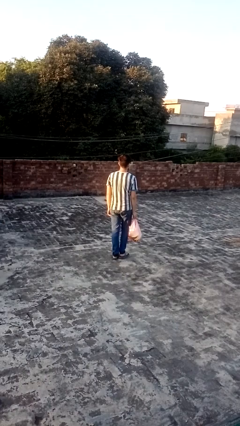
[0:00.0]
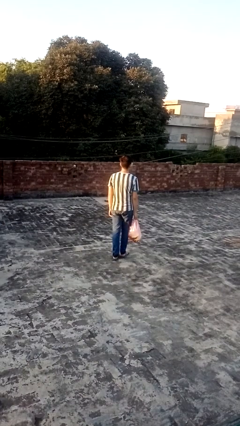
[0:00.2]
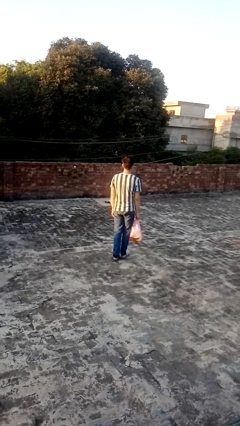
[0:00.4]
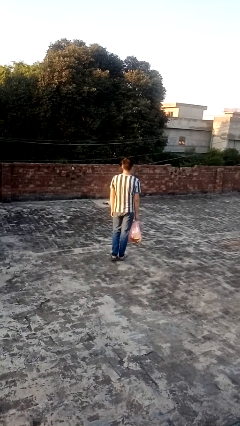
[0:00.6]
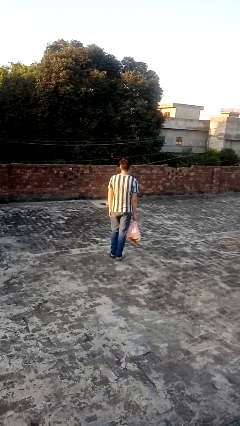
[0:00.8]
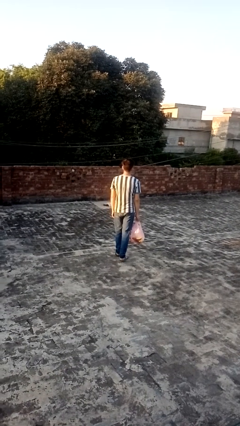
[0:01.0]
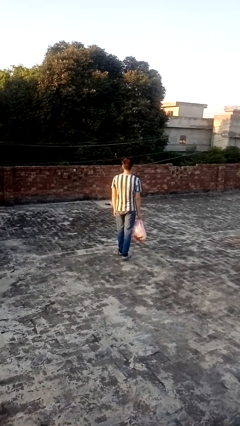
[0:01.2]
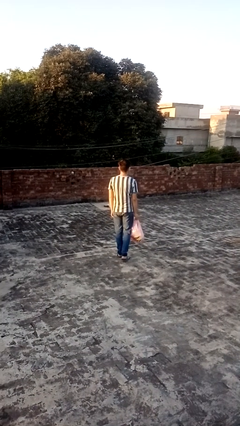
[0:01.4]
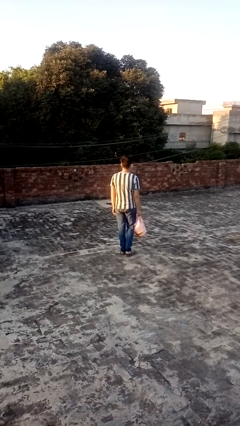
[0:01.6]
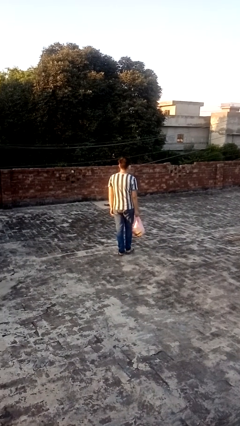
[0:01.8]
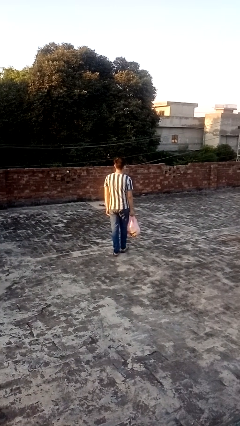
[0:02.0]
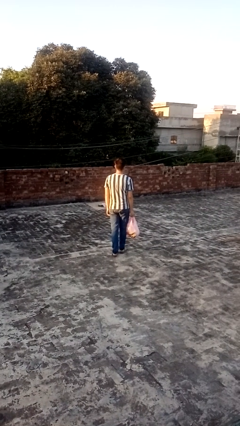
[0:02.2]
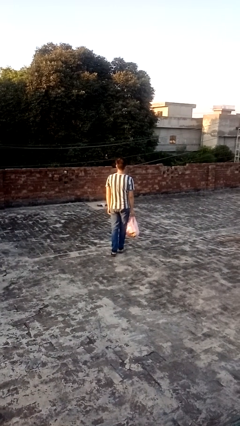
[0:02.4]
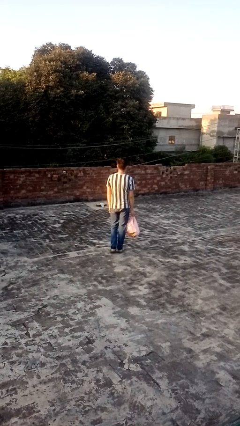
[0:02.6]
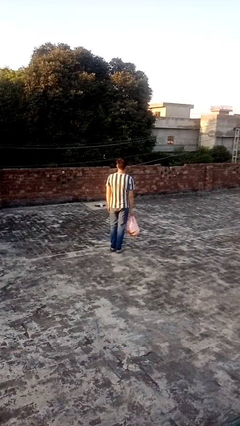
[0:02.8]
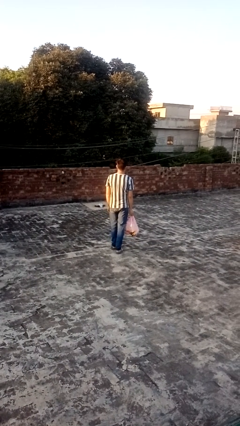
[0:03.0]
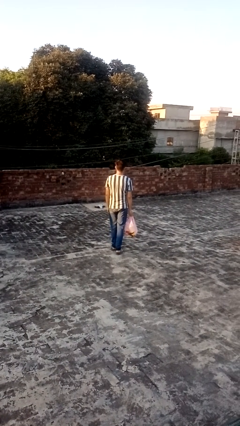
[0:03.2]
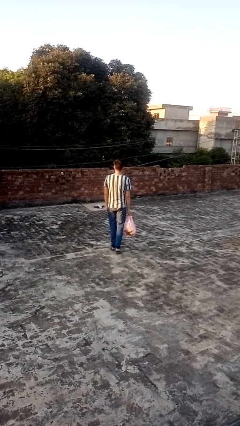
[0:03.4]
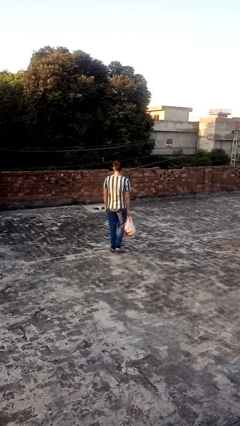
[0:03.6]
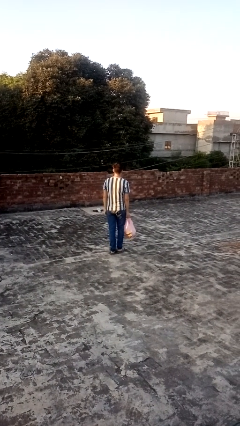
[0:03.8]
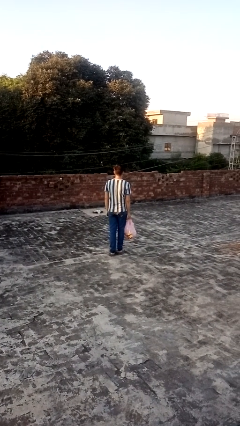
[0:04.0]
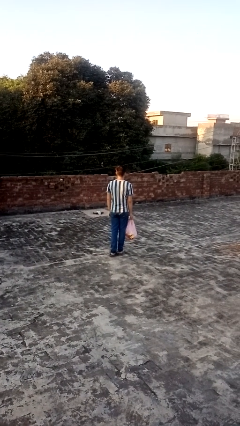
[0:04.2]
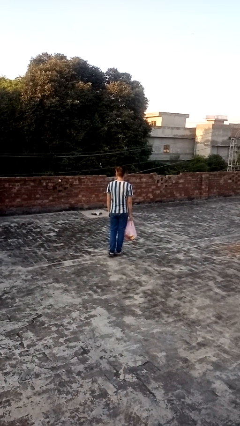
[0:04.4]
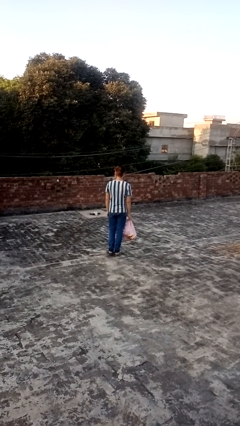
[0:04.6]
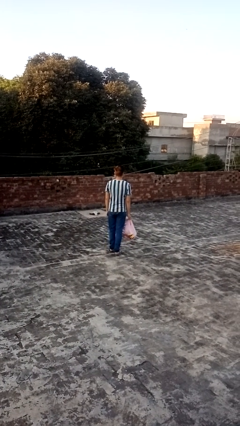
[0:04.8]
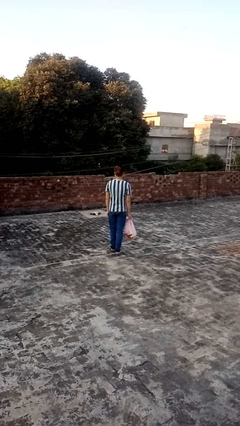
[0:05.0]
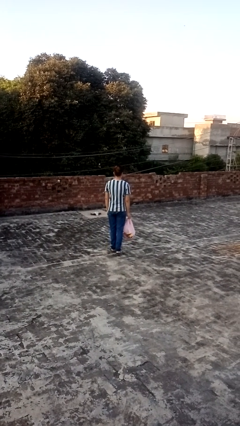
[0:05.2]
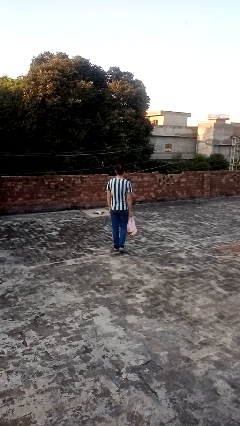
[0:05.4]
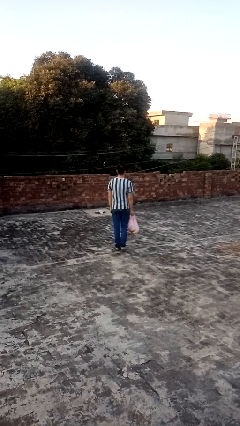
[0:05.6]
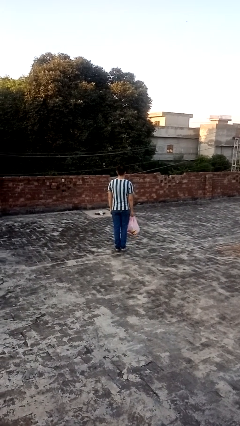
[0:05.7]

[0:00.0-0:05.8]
person carries groceries

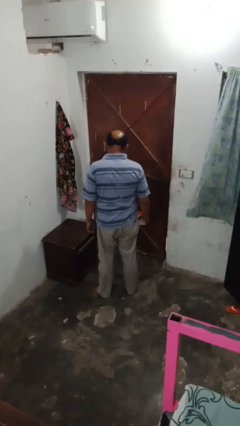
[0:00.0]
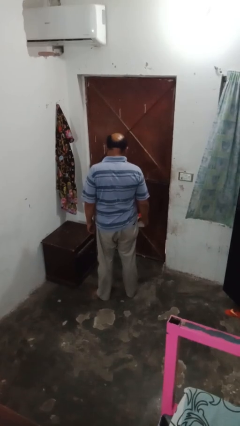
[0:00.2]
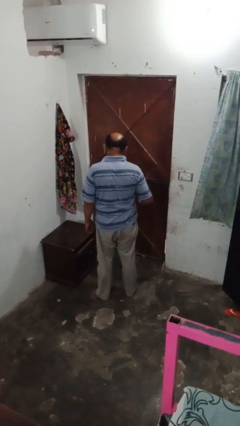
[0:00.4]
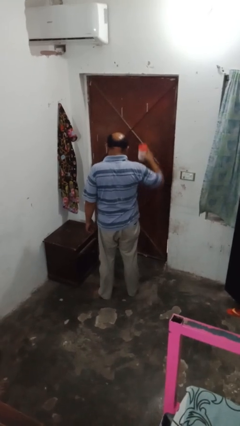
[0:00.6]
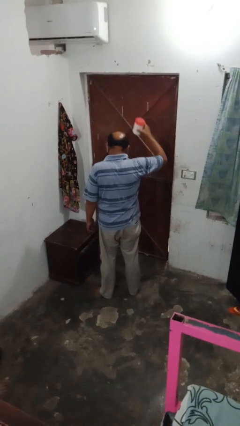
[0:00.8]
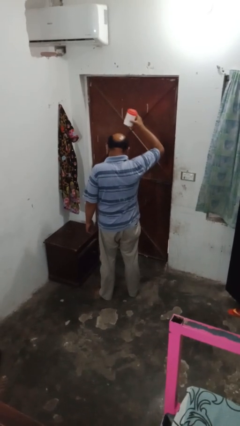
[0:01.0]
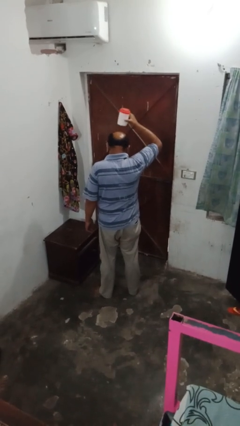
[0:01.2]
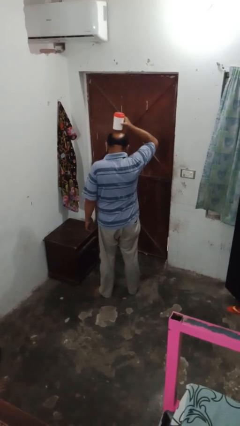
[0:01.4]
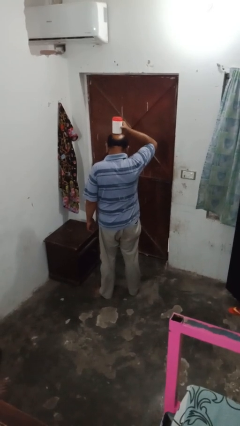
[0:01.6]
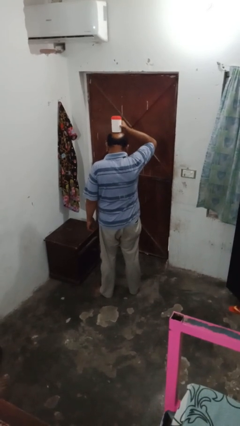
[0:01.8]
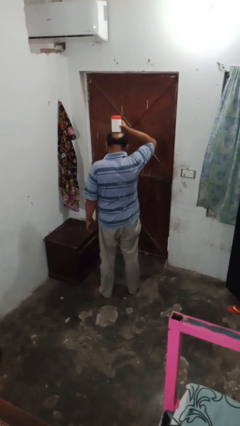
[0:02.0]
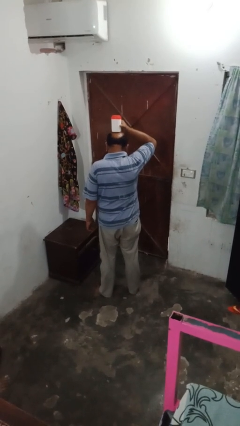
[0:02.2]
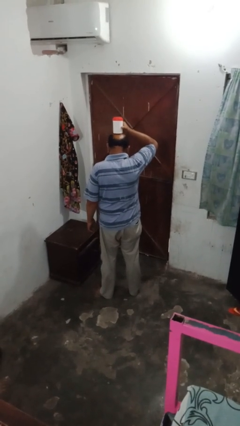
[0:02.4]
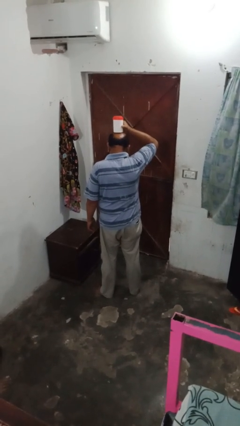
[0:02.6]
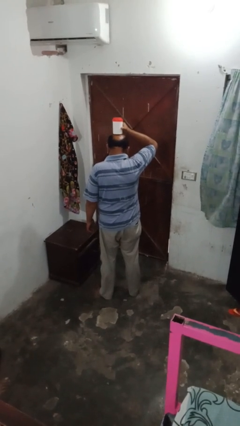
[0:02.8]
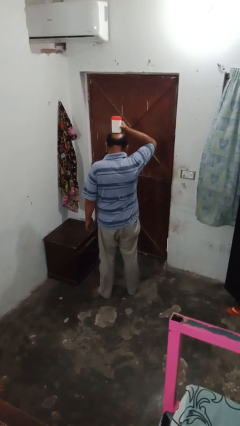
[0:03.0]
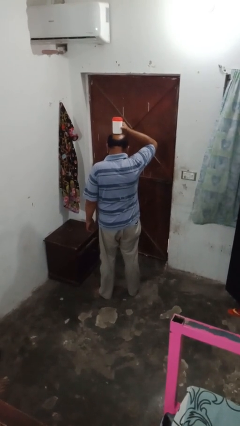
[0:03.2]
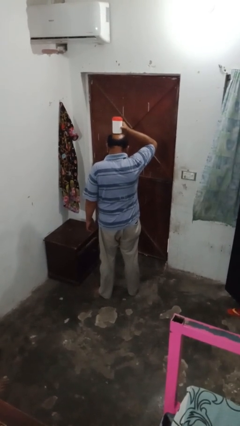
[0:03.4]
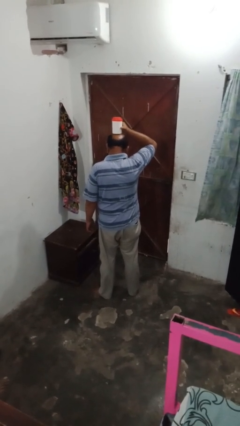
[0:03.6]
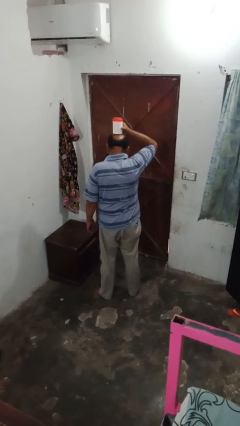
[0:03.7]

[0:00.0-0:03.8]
person holds object above head

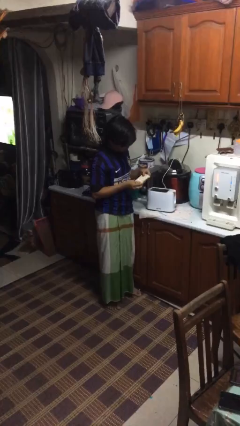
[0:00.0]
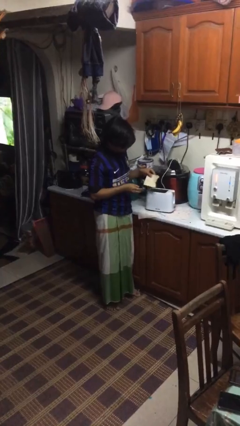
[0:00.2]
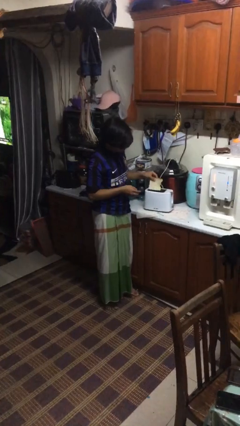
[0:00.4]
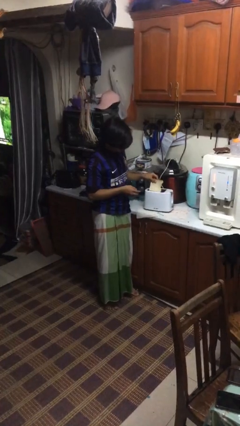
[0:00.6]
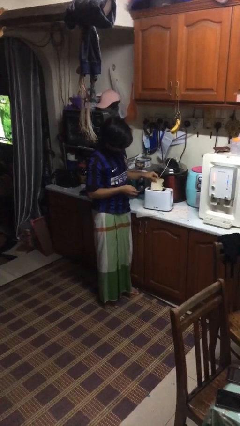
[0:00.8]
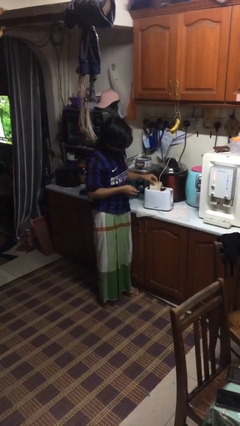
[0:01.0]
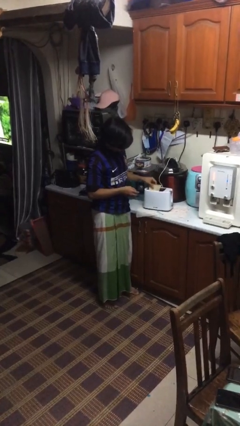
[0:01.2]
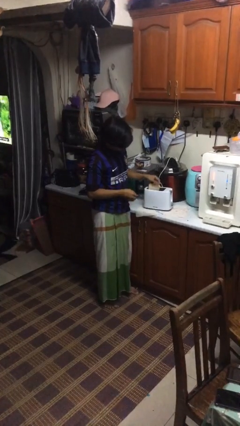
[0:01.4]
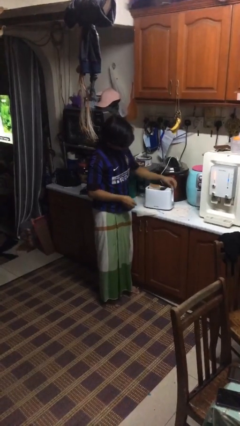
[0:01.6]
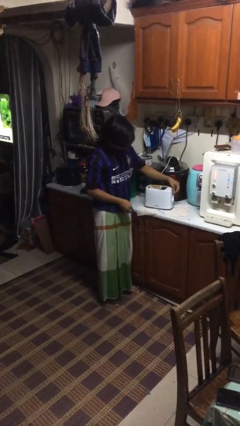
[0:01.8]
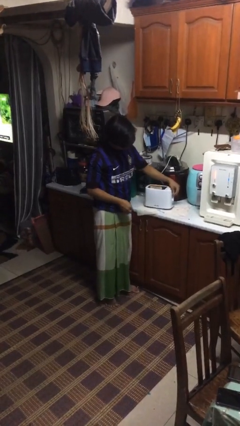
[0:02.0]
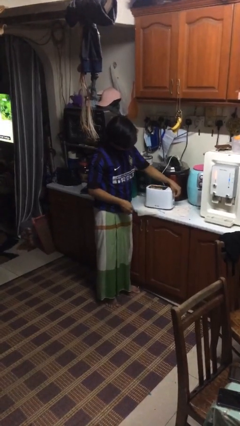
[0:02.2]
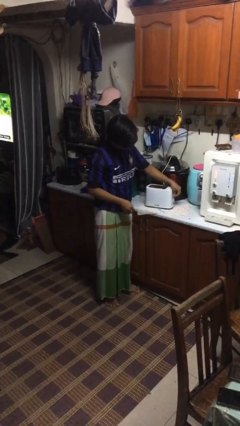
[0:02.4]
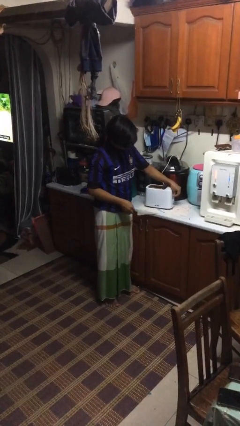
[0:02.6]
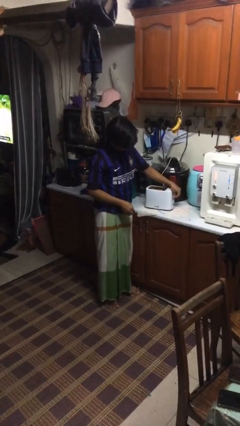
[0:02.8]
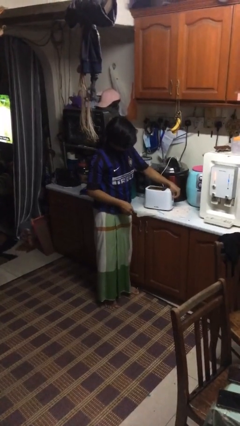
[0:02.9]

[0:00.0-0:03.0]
person puts object into toaster

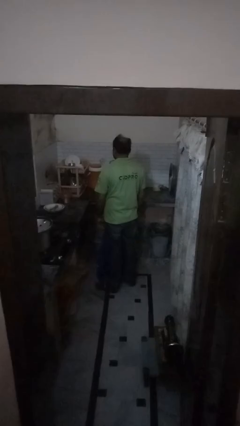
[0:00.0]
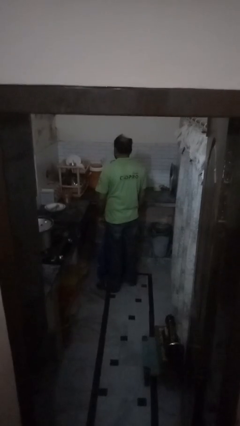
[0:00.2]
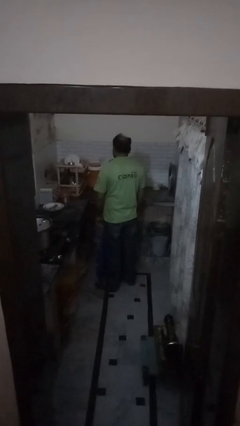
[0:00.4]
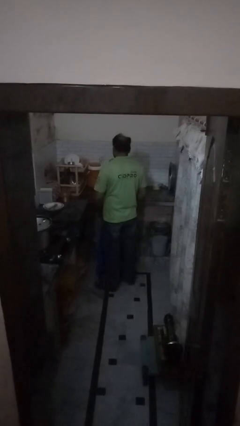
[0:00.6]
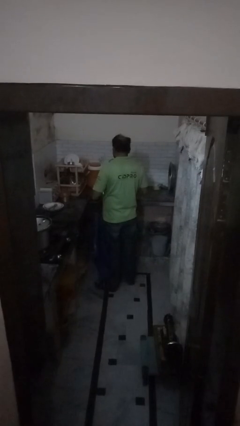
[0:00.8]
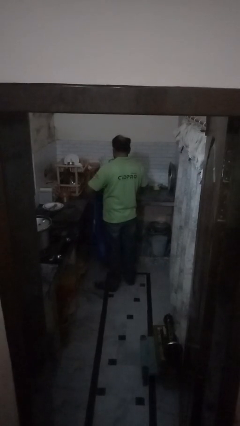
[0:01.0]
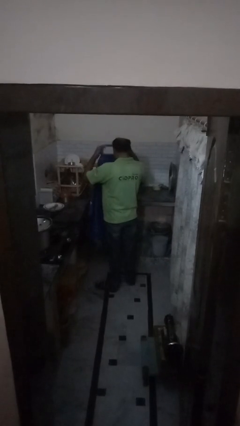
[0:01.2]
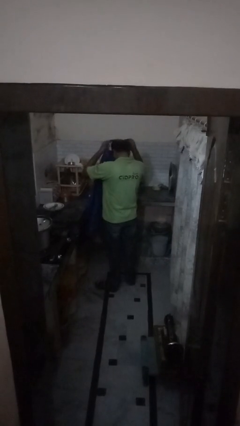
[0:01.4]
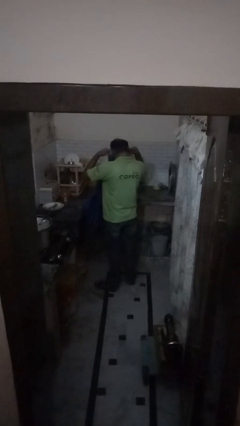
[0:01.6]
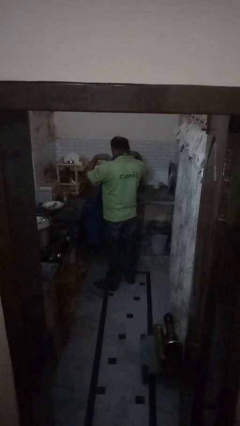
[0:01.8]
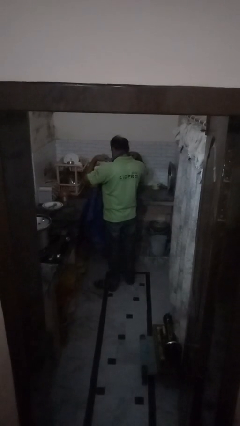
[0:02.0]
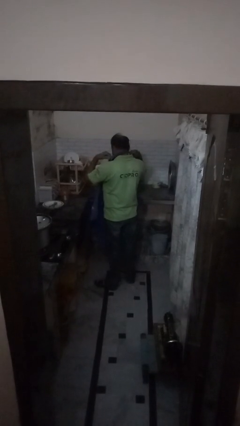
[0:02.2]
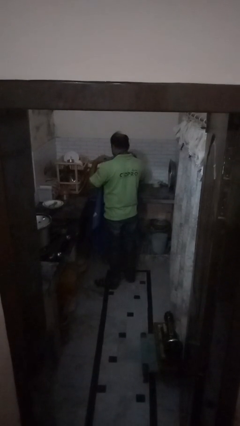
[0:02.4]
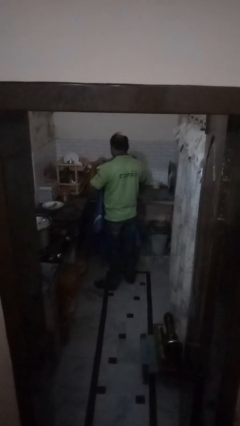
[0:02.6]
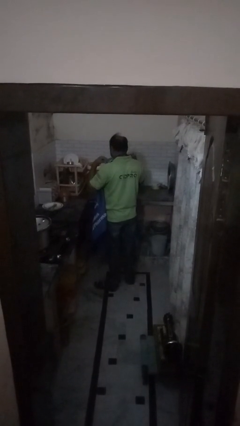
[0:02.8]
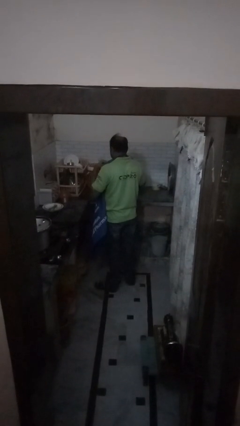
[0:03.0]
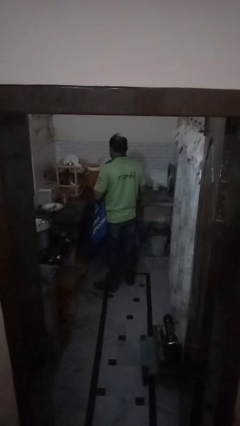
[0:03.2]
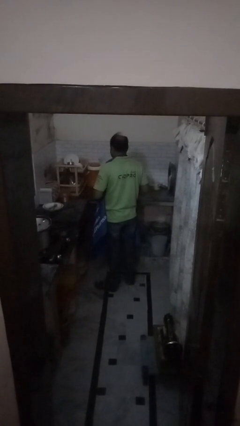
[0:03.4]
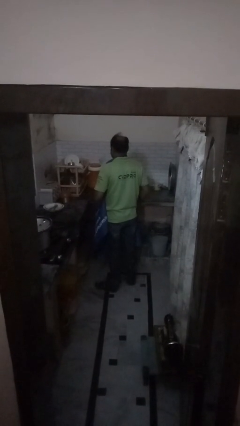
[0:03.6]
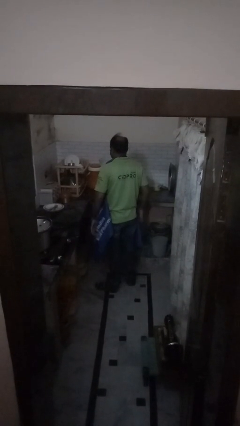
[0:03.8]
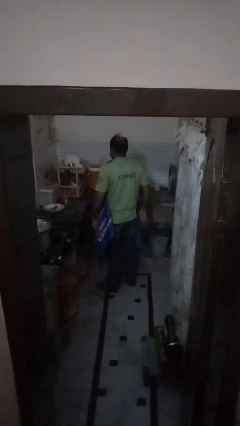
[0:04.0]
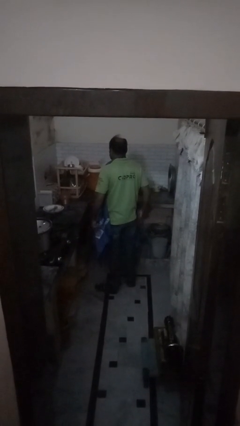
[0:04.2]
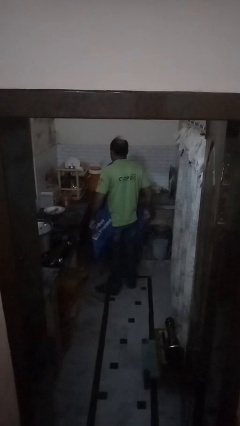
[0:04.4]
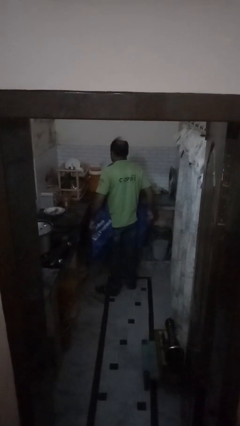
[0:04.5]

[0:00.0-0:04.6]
person puts on apron

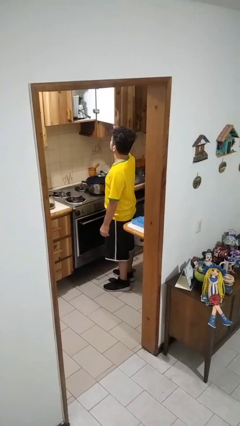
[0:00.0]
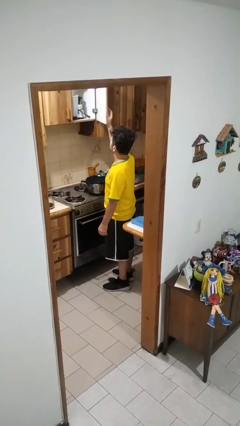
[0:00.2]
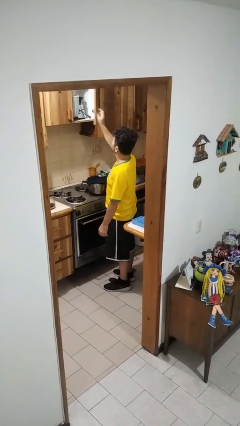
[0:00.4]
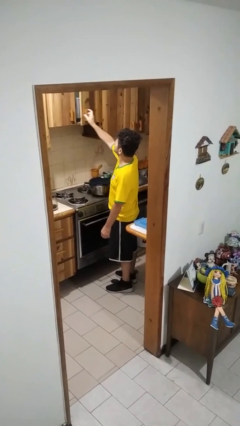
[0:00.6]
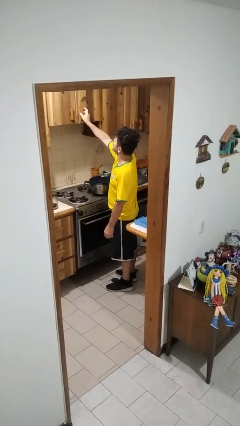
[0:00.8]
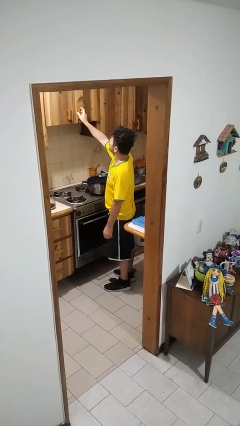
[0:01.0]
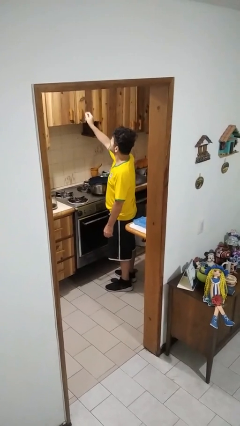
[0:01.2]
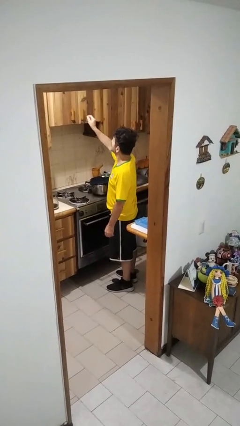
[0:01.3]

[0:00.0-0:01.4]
person closes cabinet
